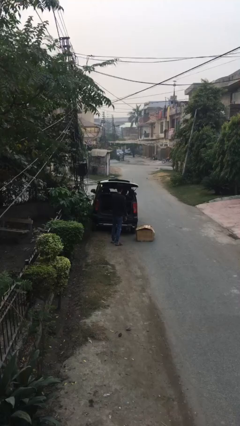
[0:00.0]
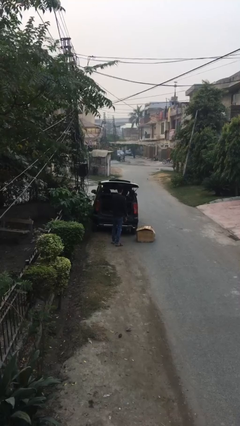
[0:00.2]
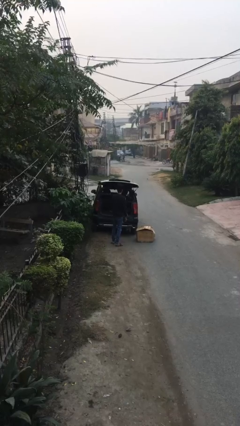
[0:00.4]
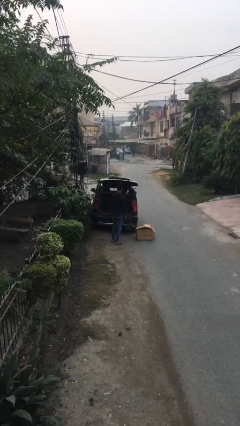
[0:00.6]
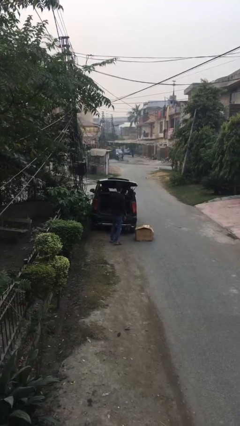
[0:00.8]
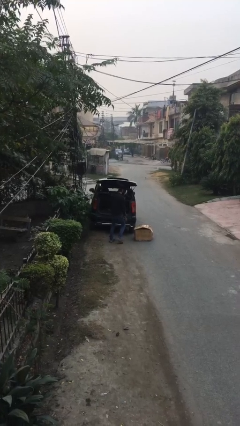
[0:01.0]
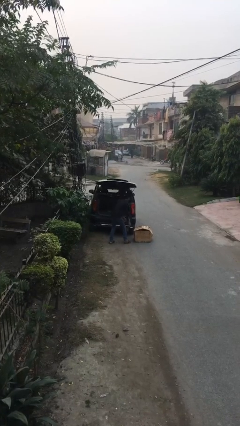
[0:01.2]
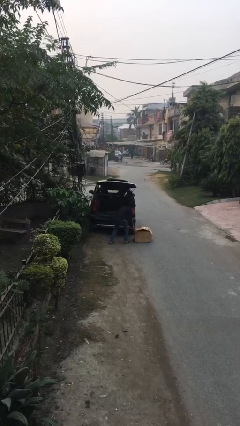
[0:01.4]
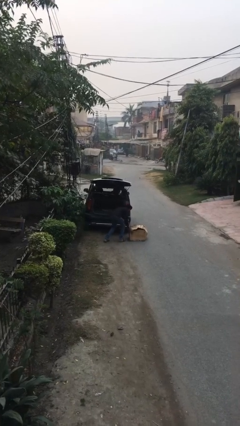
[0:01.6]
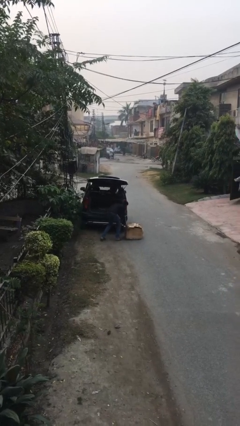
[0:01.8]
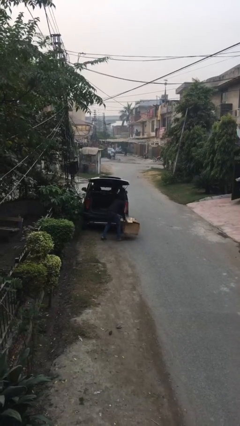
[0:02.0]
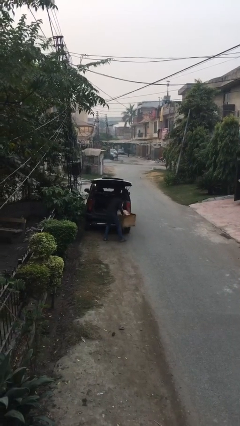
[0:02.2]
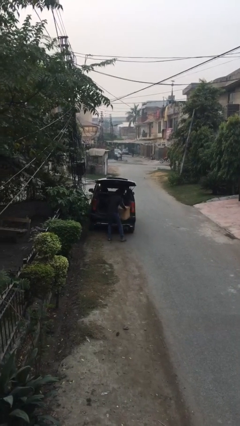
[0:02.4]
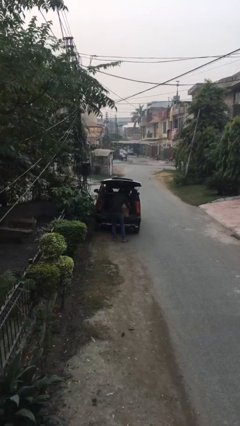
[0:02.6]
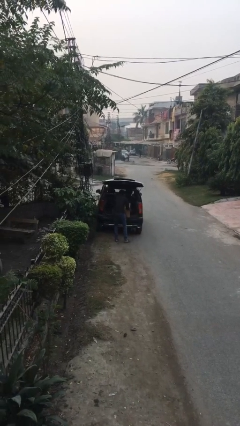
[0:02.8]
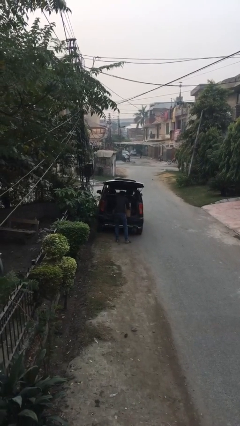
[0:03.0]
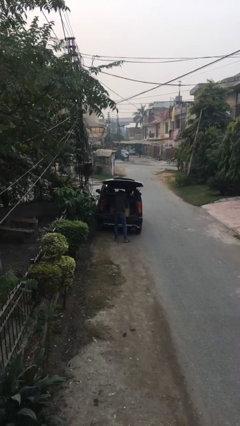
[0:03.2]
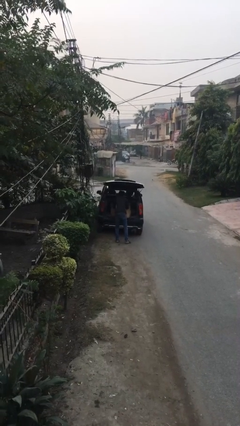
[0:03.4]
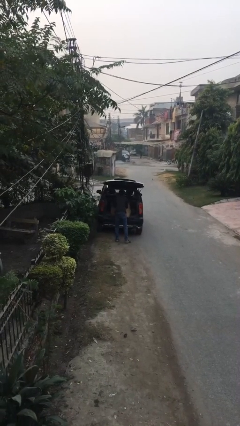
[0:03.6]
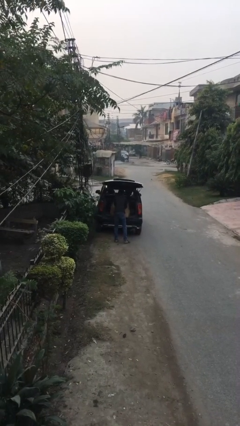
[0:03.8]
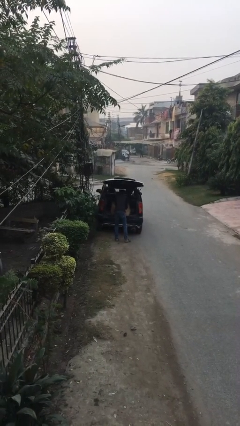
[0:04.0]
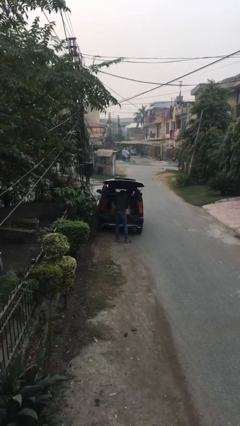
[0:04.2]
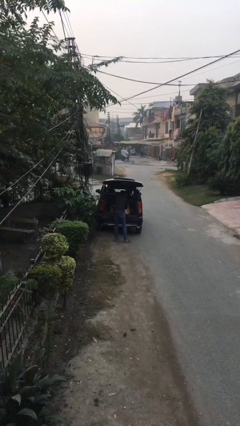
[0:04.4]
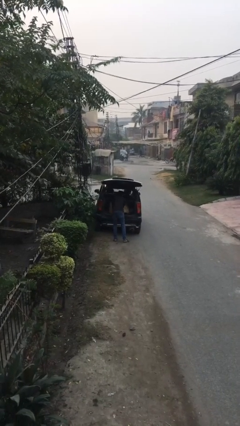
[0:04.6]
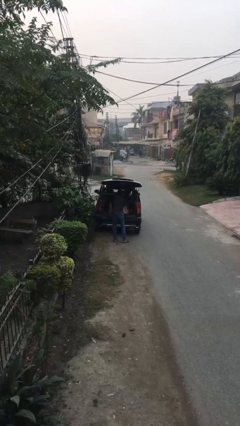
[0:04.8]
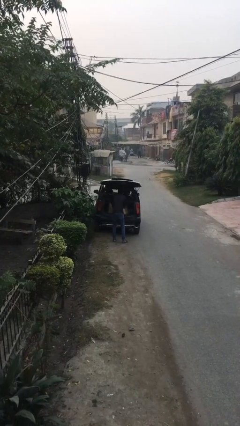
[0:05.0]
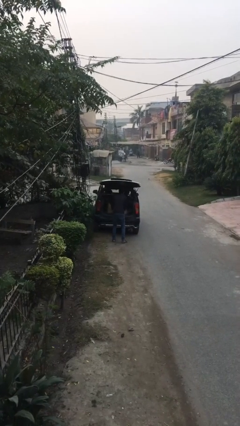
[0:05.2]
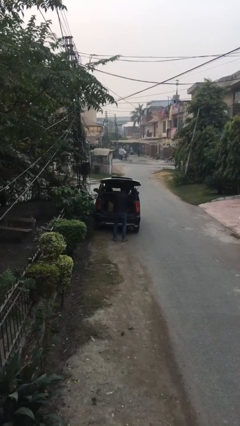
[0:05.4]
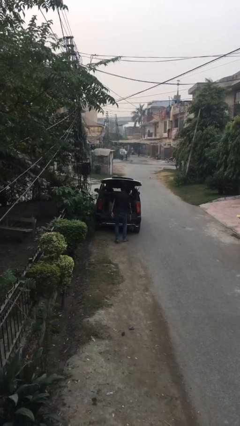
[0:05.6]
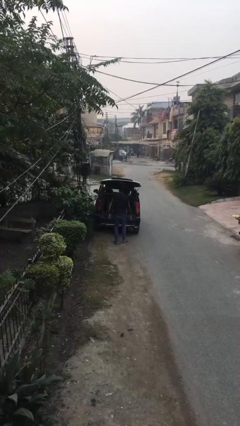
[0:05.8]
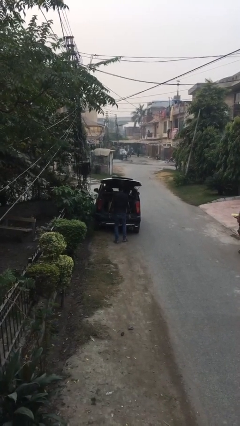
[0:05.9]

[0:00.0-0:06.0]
person loads car

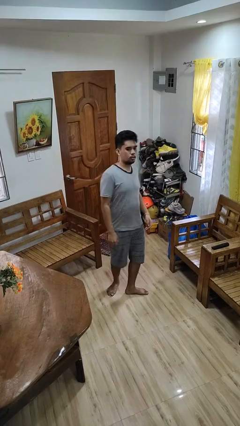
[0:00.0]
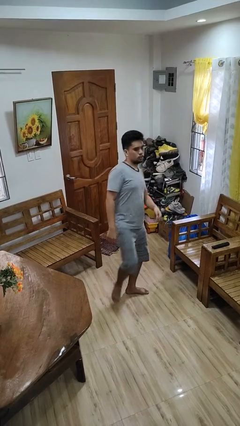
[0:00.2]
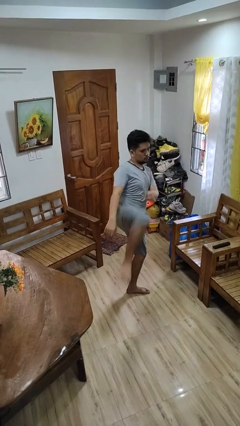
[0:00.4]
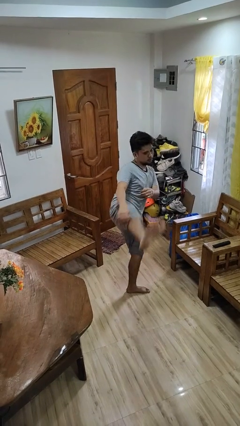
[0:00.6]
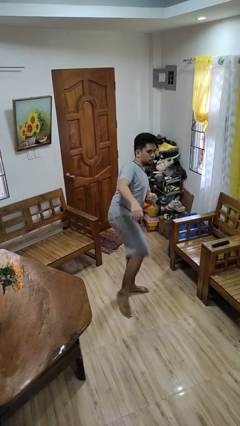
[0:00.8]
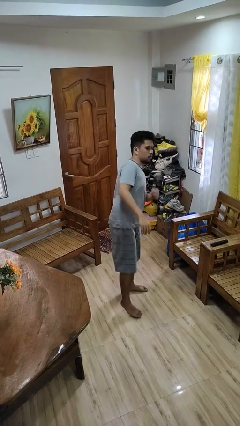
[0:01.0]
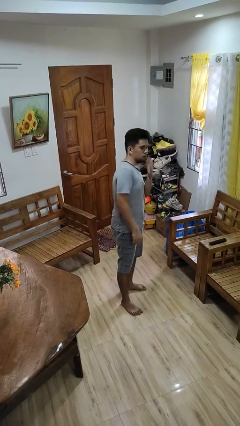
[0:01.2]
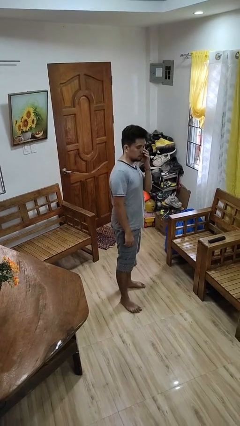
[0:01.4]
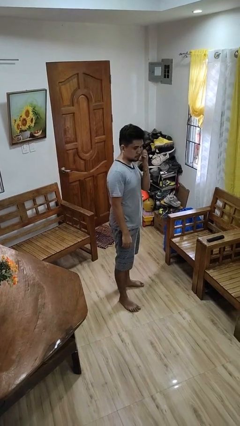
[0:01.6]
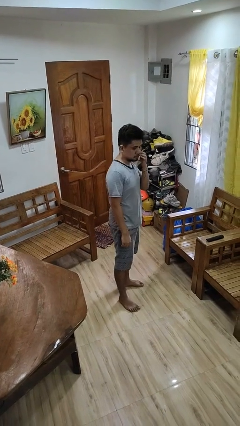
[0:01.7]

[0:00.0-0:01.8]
person karate kicks

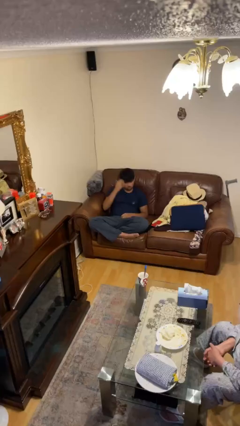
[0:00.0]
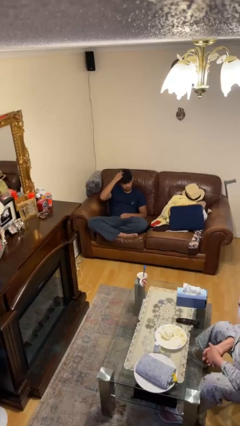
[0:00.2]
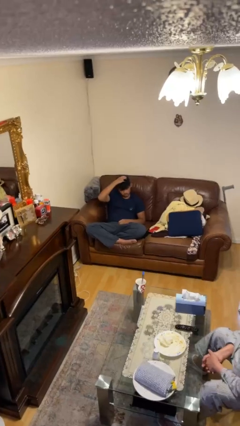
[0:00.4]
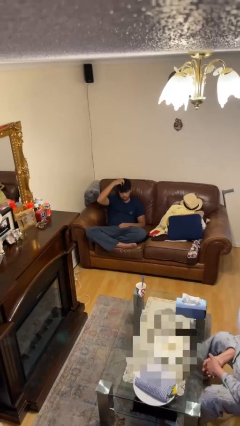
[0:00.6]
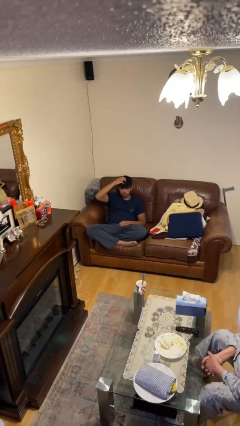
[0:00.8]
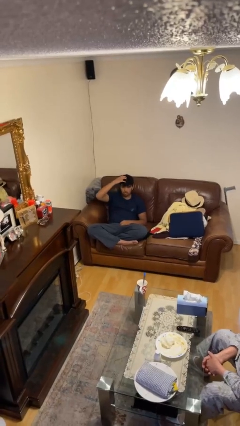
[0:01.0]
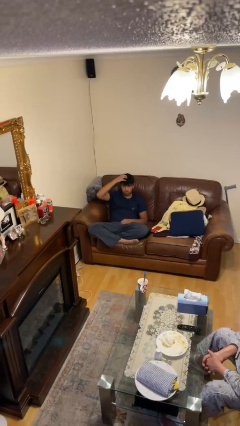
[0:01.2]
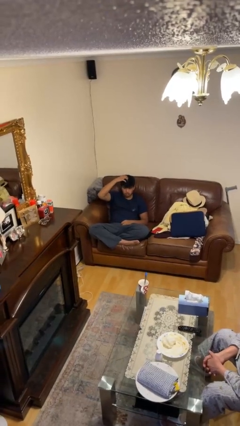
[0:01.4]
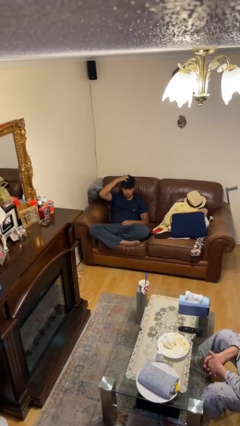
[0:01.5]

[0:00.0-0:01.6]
person strokes hair

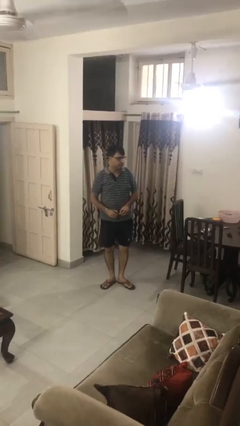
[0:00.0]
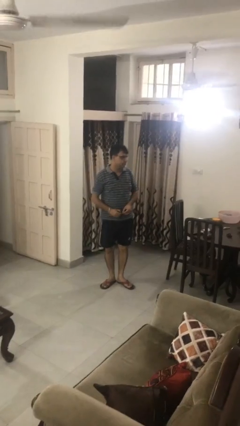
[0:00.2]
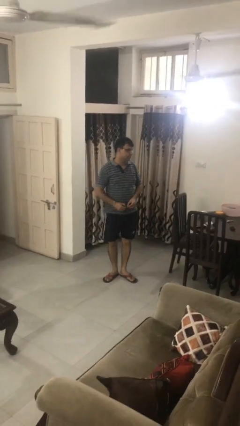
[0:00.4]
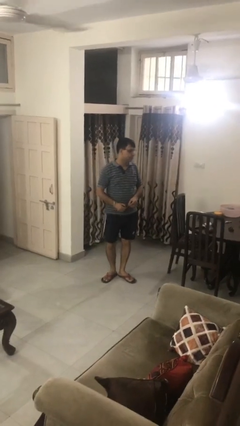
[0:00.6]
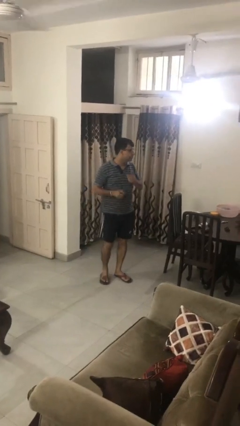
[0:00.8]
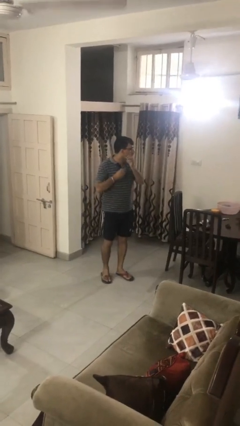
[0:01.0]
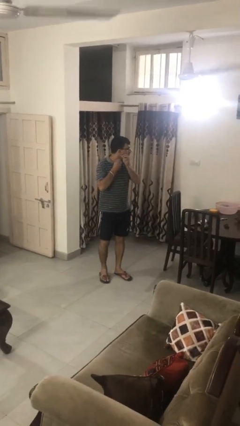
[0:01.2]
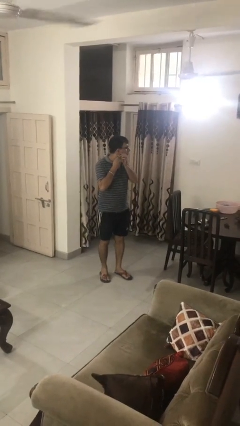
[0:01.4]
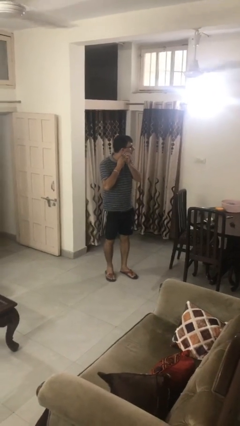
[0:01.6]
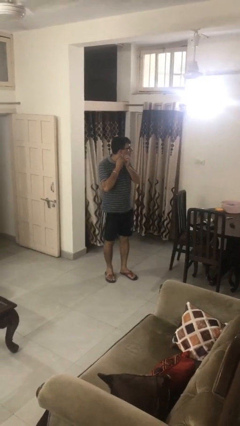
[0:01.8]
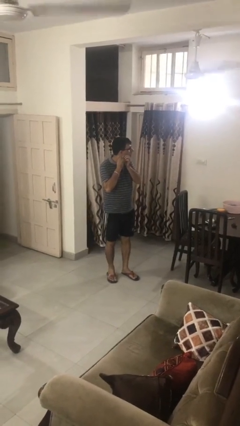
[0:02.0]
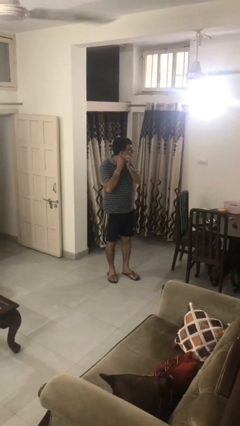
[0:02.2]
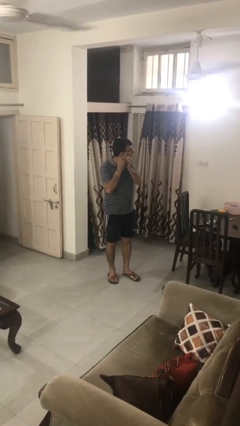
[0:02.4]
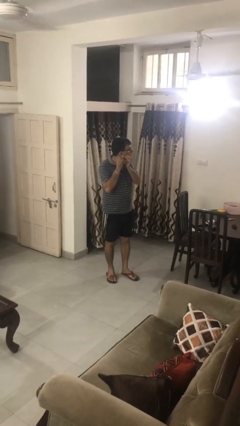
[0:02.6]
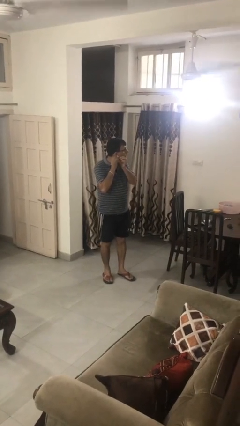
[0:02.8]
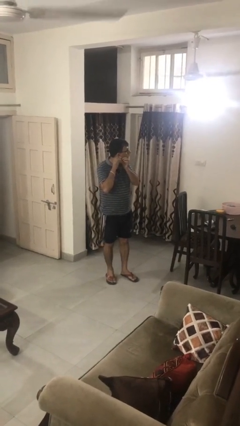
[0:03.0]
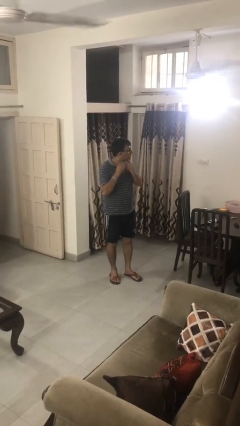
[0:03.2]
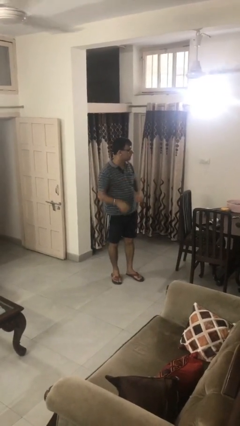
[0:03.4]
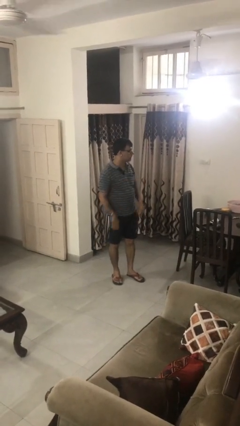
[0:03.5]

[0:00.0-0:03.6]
person puts on earrings

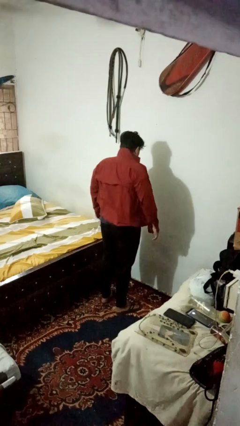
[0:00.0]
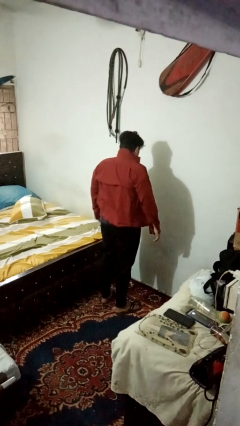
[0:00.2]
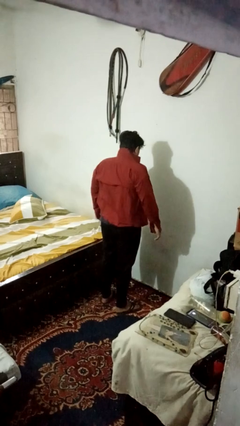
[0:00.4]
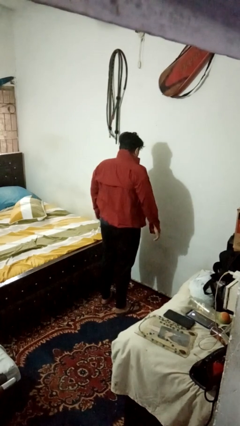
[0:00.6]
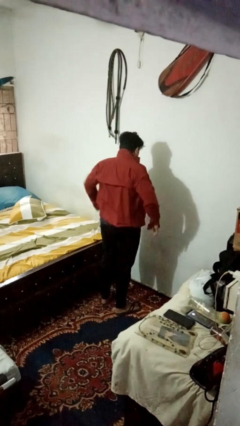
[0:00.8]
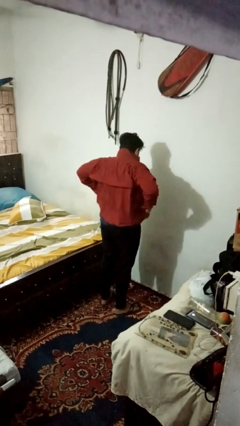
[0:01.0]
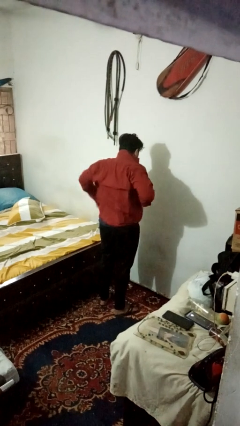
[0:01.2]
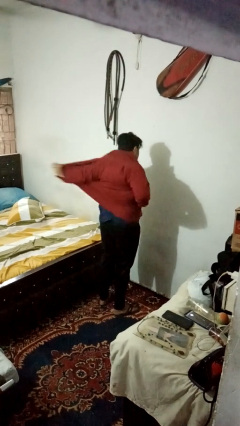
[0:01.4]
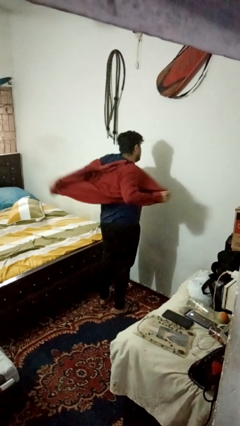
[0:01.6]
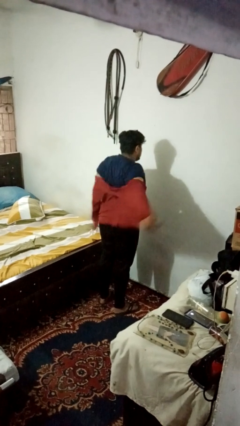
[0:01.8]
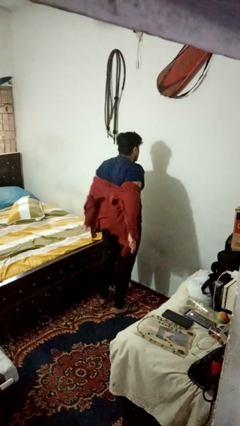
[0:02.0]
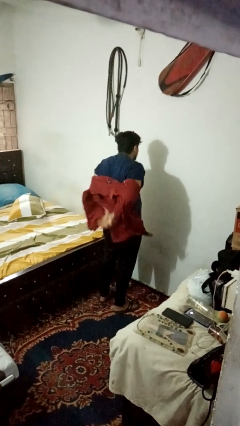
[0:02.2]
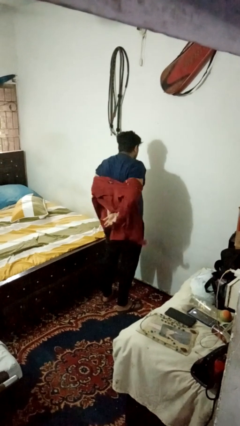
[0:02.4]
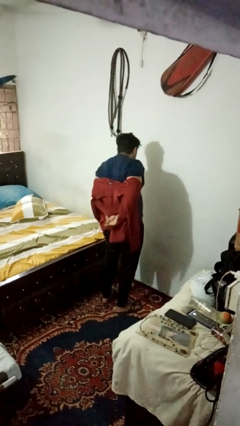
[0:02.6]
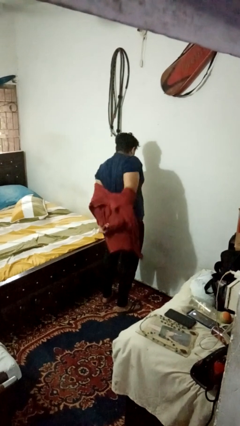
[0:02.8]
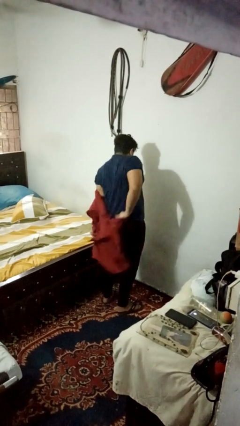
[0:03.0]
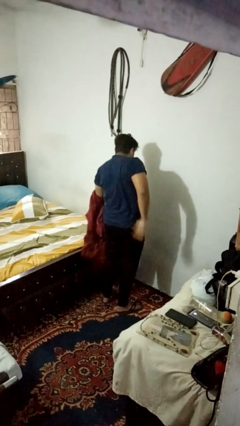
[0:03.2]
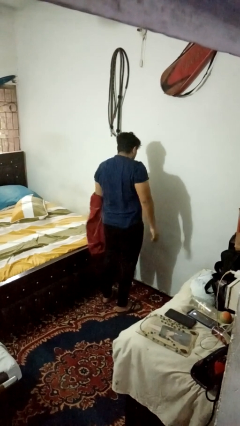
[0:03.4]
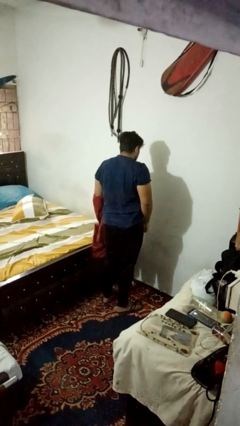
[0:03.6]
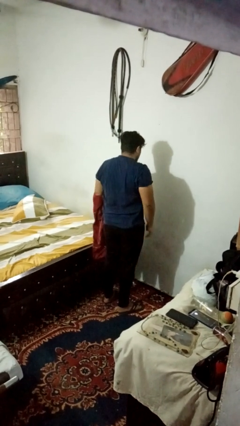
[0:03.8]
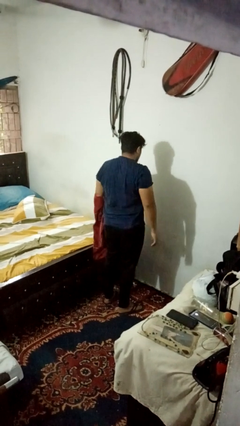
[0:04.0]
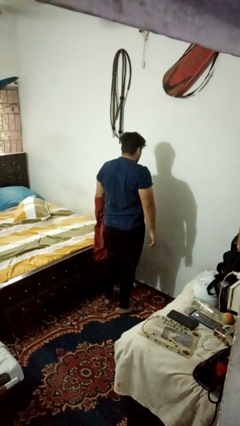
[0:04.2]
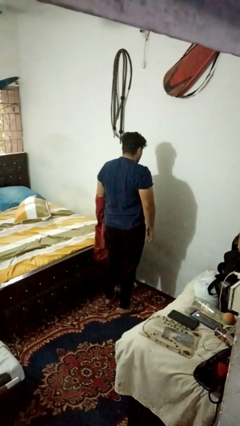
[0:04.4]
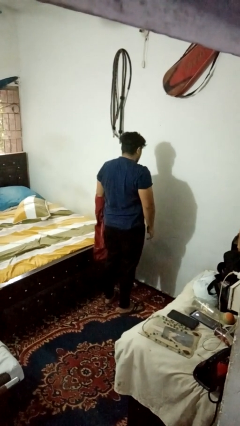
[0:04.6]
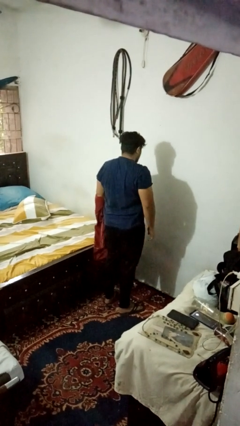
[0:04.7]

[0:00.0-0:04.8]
person takes off shirt
